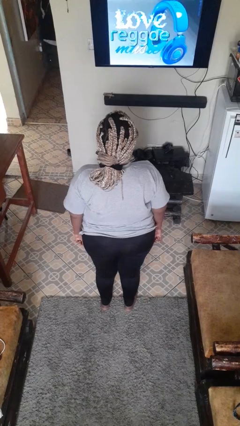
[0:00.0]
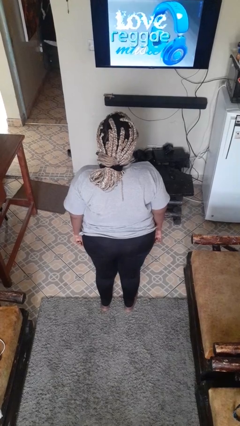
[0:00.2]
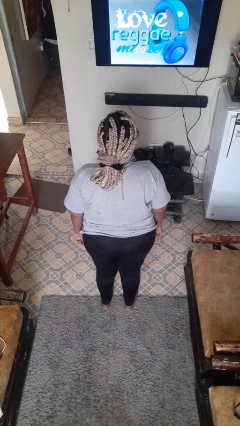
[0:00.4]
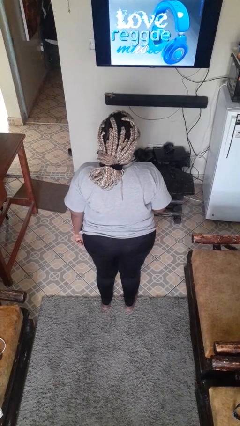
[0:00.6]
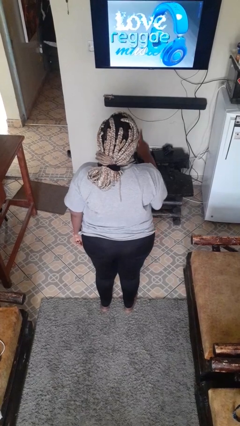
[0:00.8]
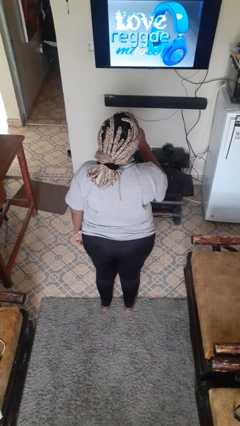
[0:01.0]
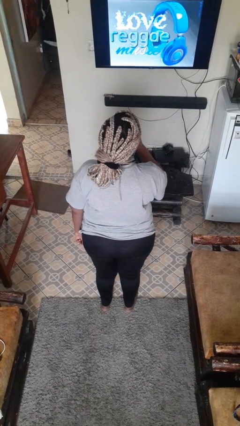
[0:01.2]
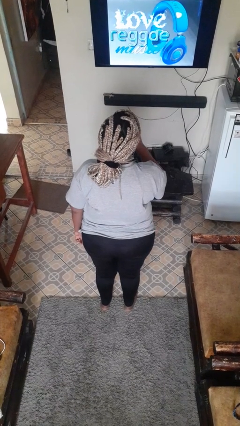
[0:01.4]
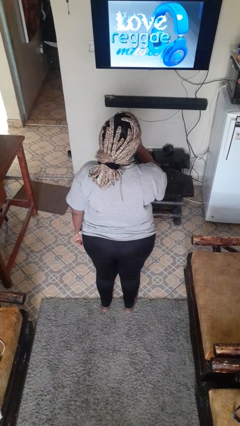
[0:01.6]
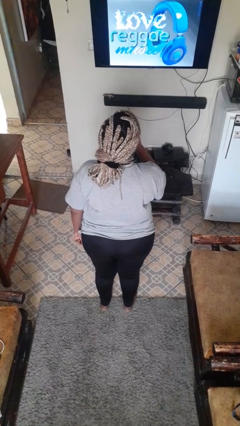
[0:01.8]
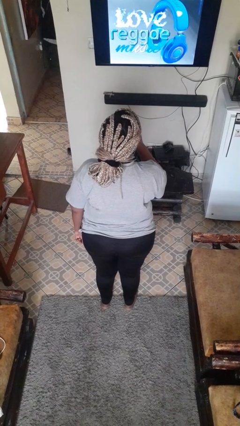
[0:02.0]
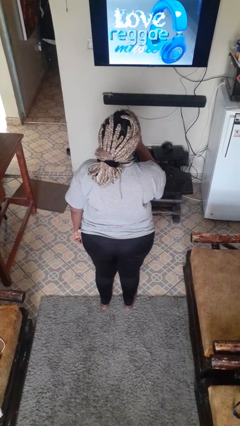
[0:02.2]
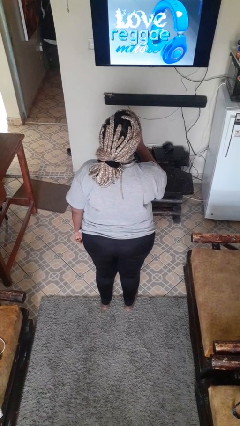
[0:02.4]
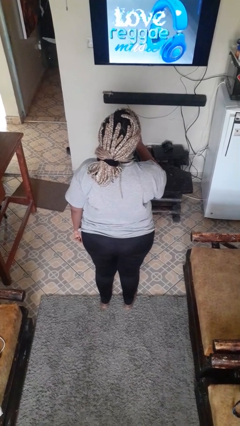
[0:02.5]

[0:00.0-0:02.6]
person gestures be quiet

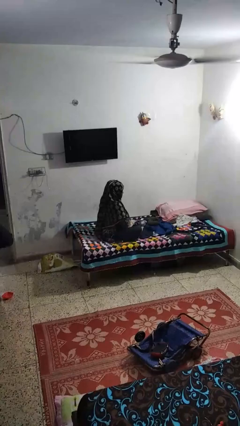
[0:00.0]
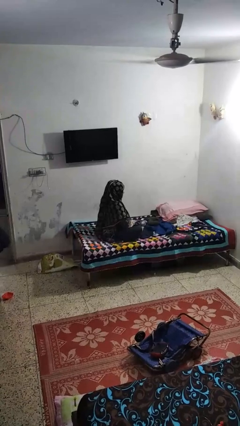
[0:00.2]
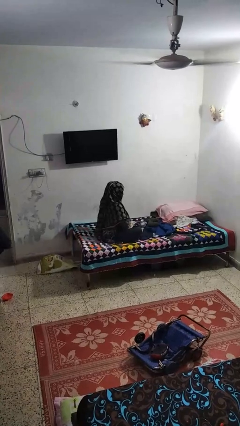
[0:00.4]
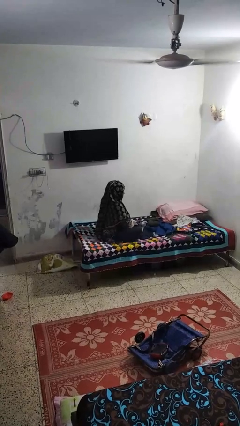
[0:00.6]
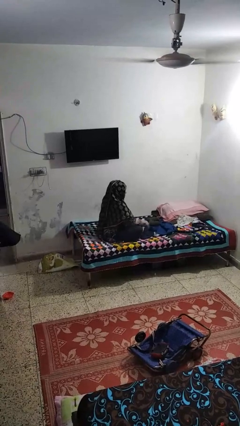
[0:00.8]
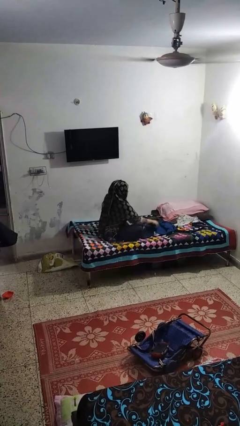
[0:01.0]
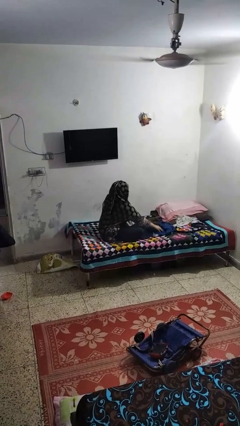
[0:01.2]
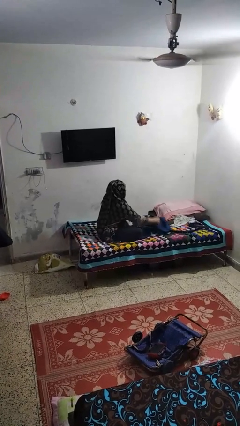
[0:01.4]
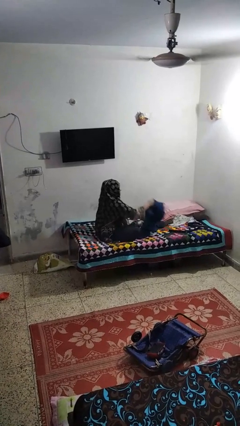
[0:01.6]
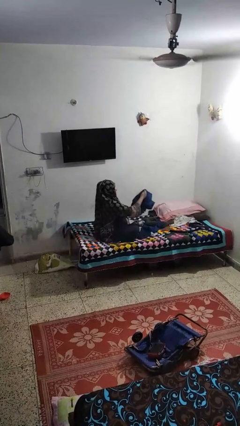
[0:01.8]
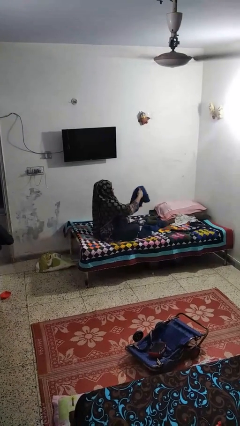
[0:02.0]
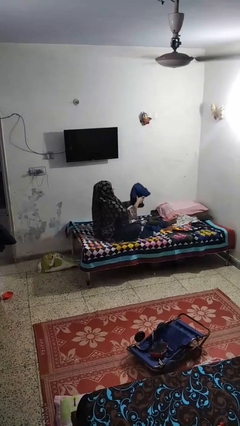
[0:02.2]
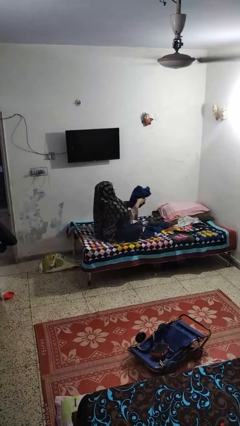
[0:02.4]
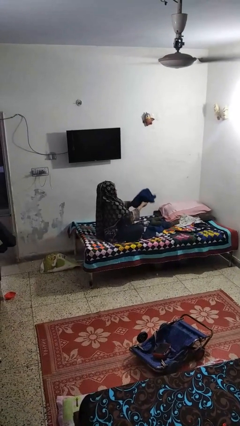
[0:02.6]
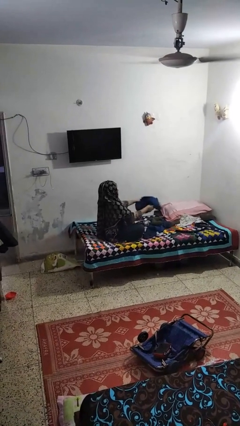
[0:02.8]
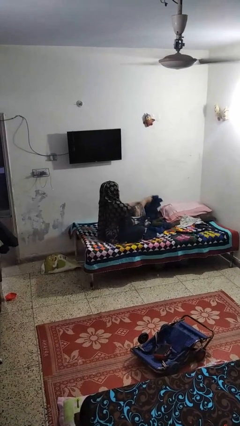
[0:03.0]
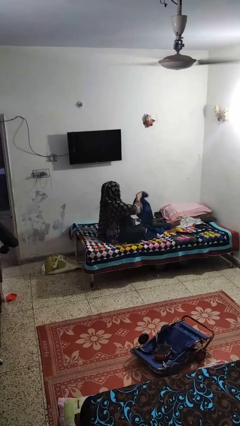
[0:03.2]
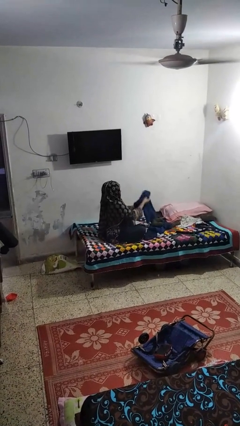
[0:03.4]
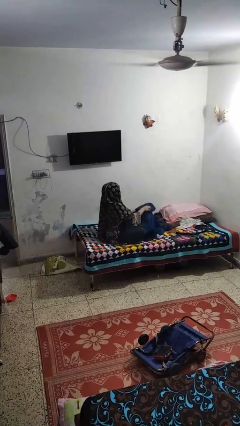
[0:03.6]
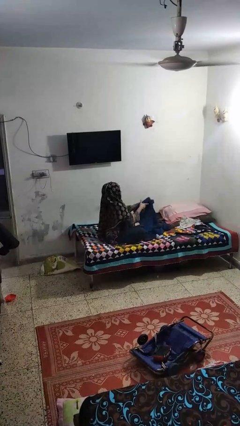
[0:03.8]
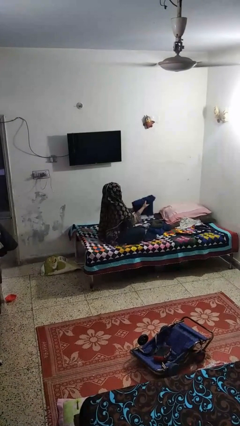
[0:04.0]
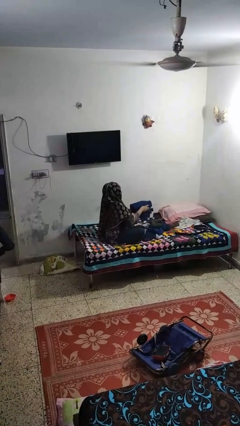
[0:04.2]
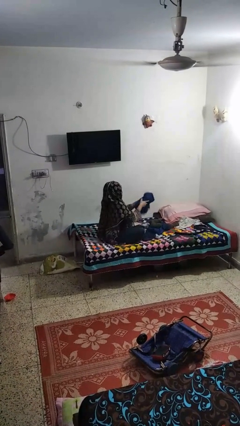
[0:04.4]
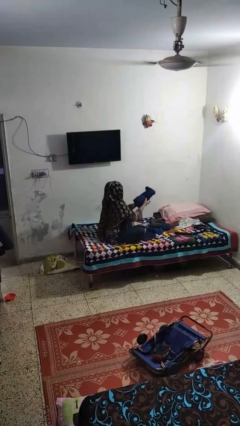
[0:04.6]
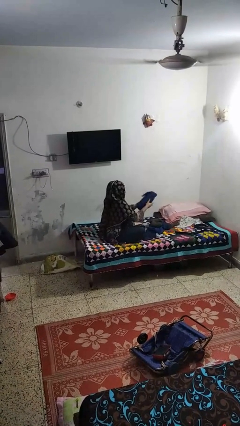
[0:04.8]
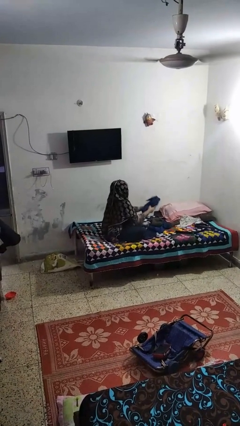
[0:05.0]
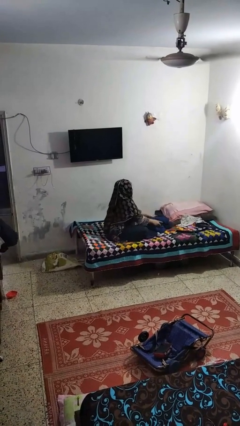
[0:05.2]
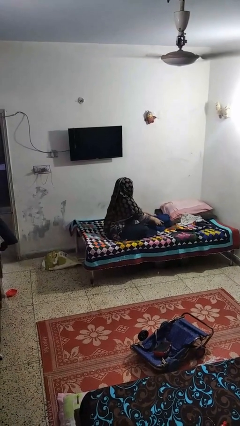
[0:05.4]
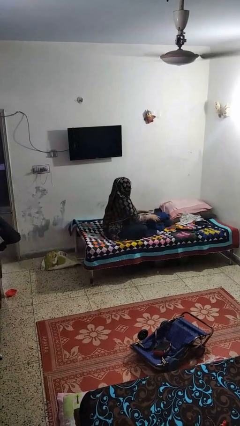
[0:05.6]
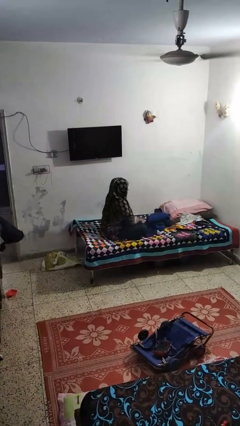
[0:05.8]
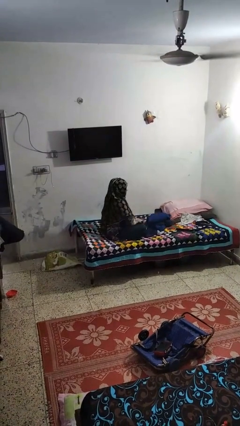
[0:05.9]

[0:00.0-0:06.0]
person folds shirt

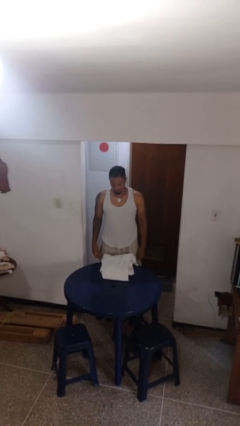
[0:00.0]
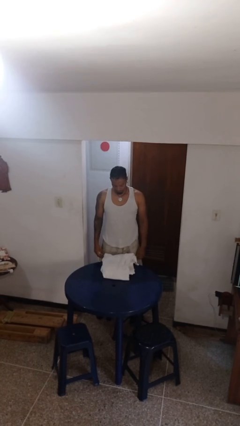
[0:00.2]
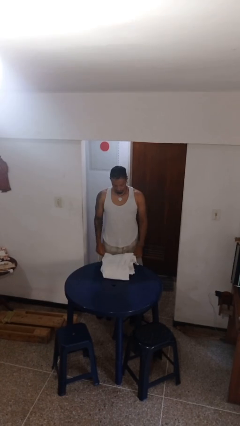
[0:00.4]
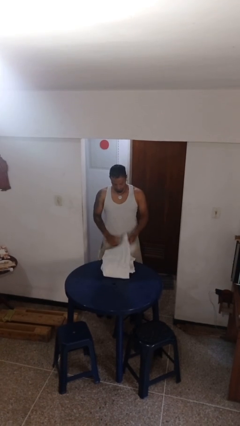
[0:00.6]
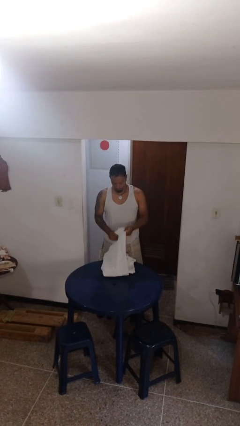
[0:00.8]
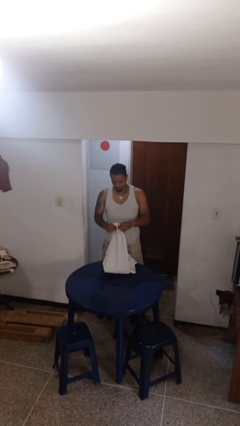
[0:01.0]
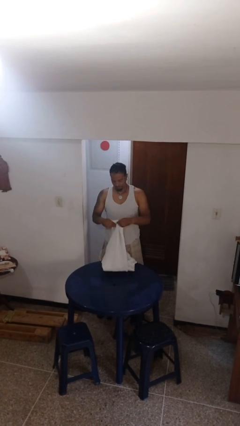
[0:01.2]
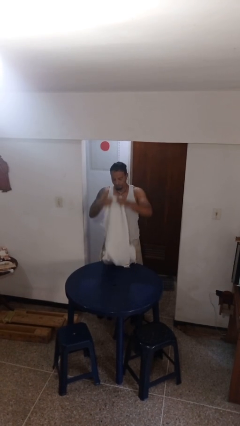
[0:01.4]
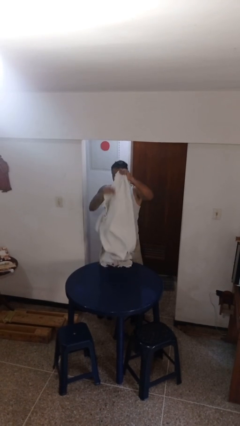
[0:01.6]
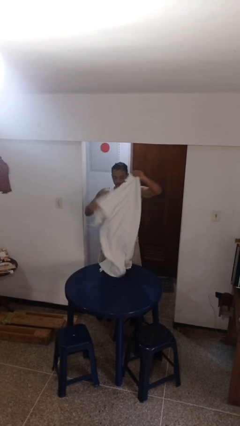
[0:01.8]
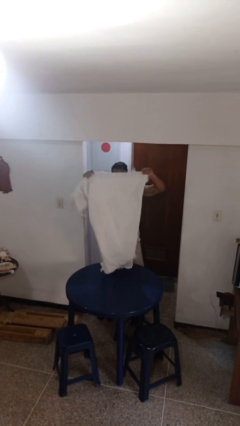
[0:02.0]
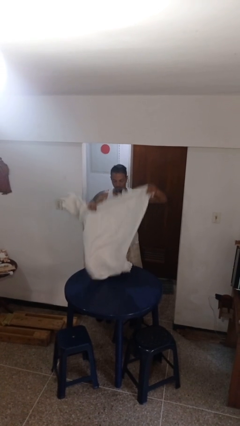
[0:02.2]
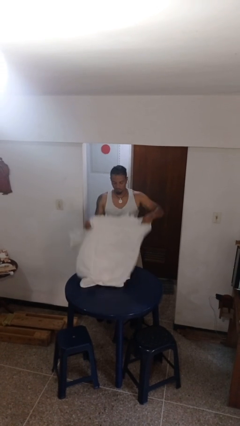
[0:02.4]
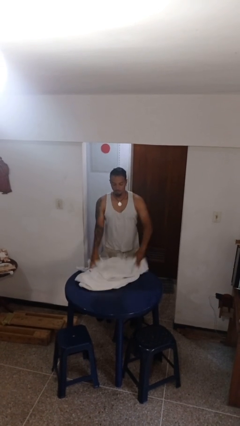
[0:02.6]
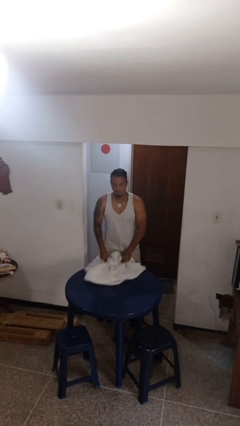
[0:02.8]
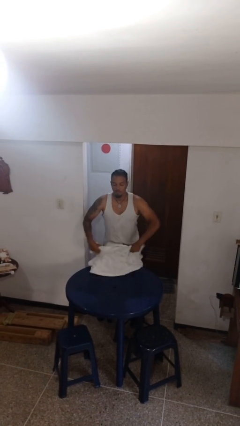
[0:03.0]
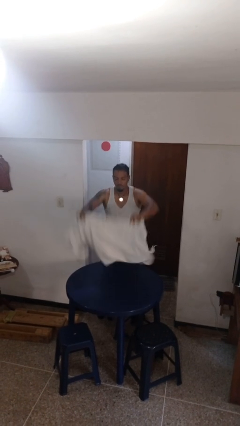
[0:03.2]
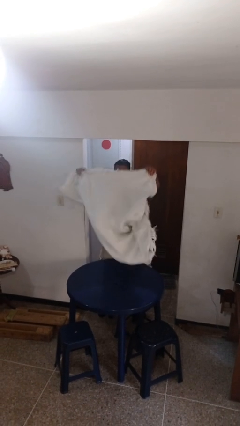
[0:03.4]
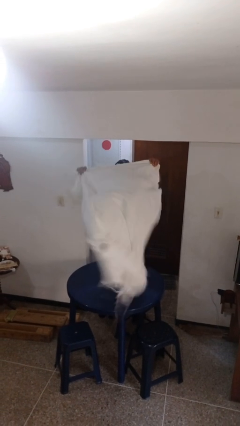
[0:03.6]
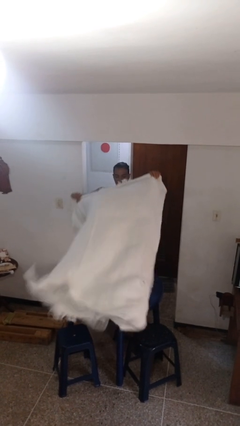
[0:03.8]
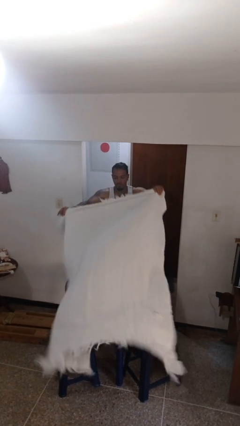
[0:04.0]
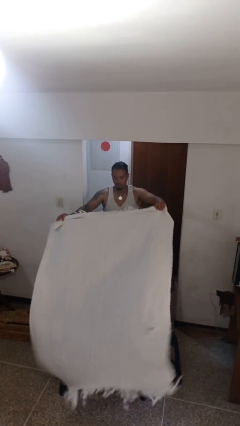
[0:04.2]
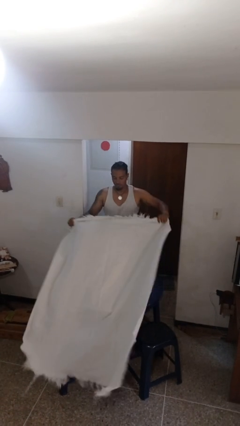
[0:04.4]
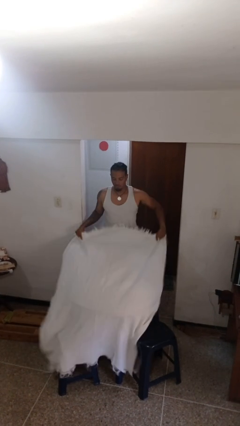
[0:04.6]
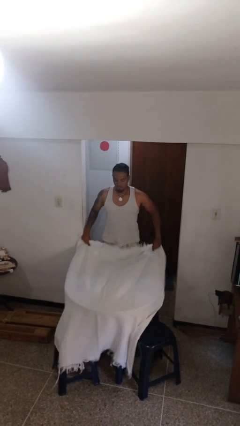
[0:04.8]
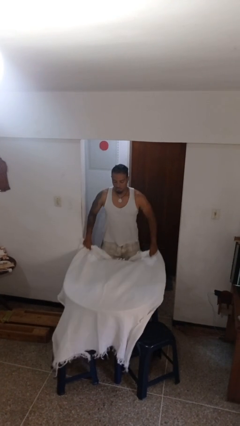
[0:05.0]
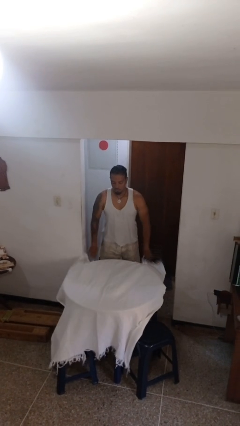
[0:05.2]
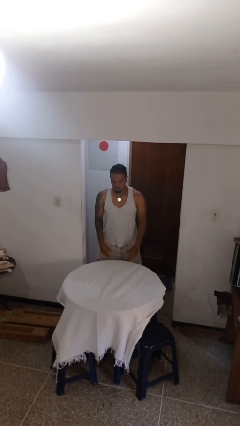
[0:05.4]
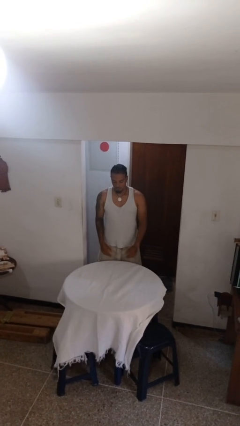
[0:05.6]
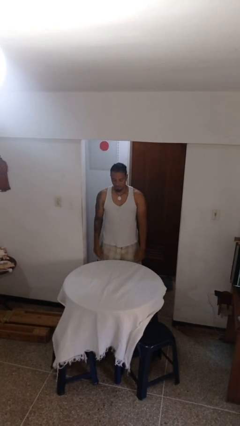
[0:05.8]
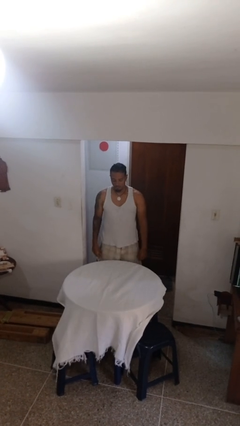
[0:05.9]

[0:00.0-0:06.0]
person spreads tablecloth

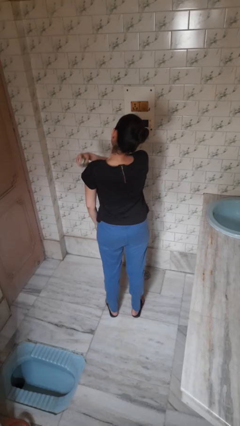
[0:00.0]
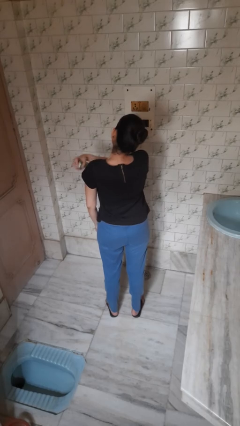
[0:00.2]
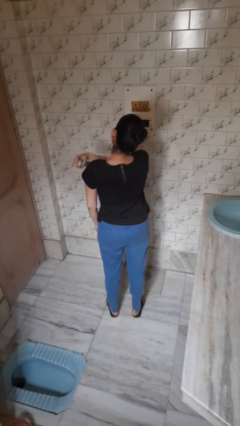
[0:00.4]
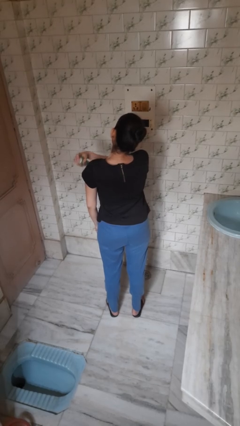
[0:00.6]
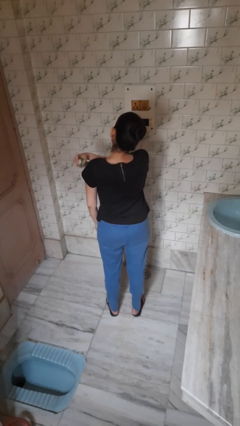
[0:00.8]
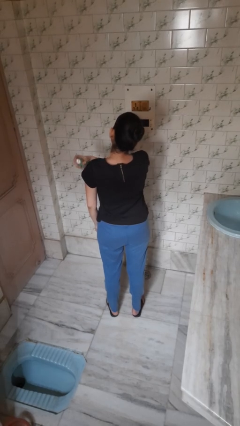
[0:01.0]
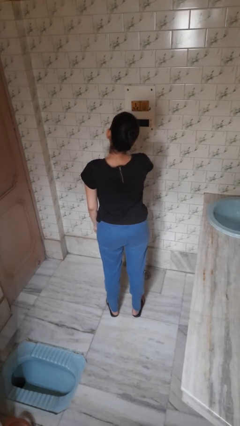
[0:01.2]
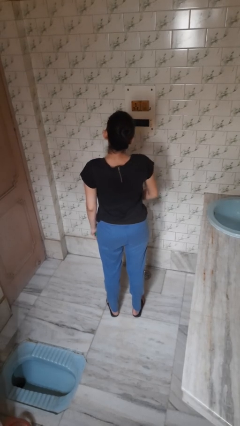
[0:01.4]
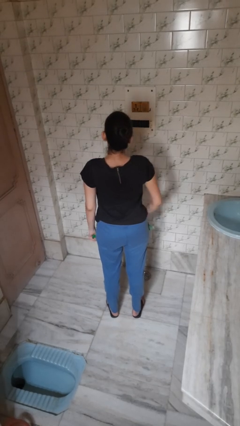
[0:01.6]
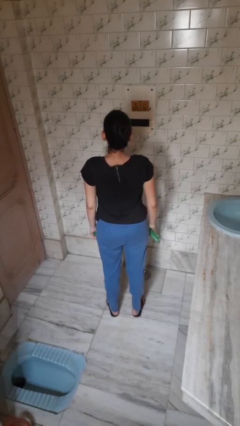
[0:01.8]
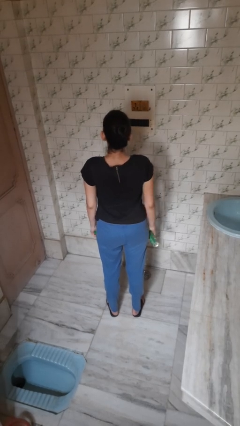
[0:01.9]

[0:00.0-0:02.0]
person applies deodorant

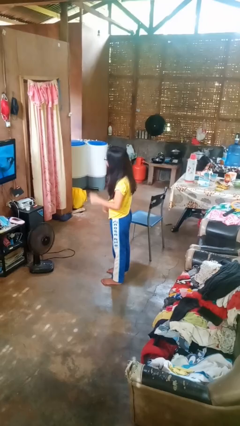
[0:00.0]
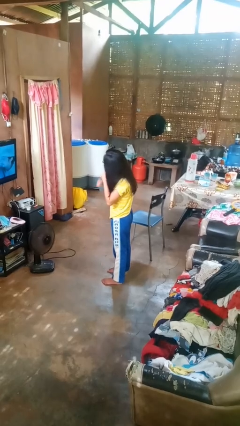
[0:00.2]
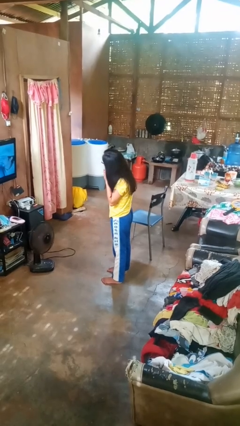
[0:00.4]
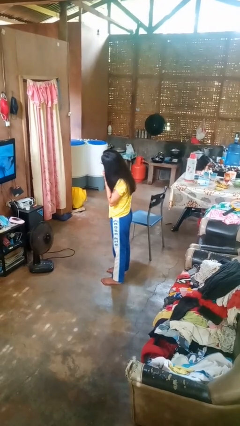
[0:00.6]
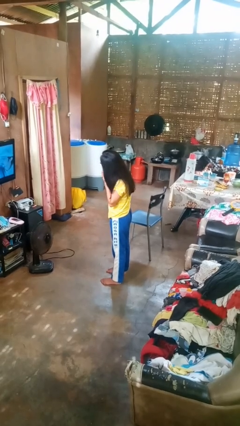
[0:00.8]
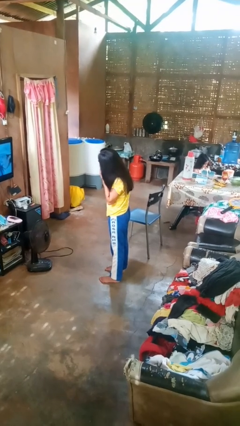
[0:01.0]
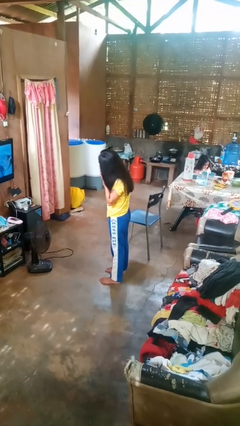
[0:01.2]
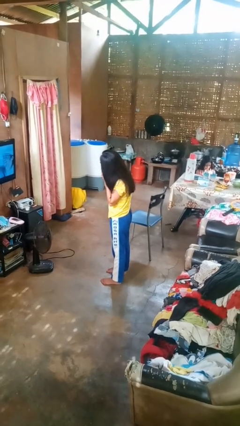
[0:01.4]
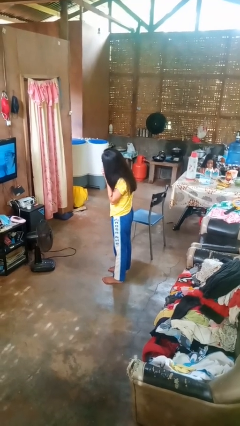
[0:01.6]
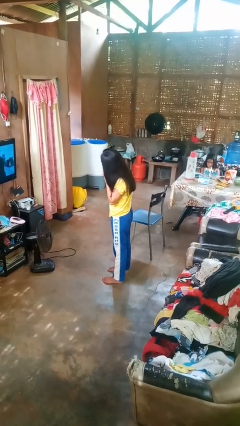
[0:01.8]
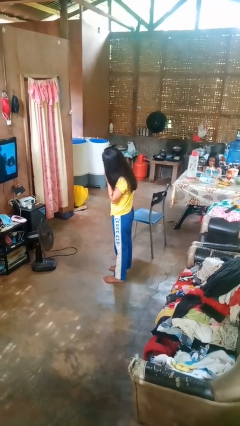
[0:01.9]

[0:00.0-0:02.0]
person takes off earrings
